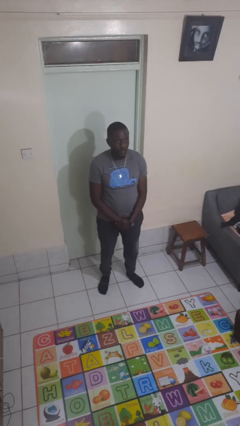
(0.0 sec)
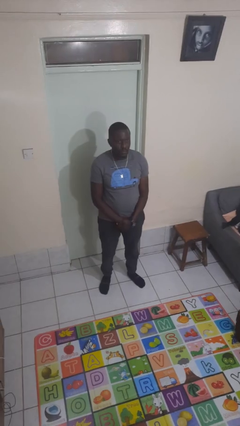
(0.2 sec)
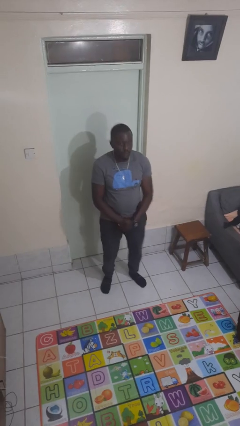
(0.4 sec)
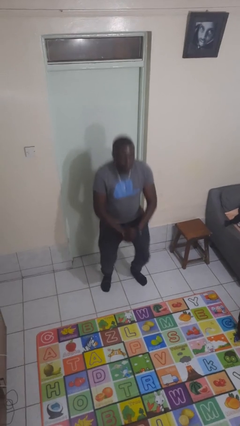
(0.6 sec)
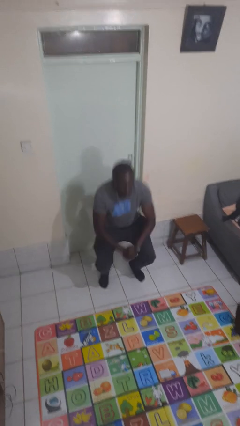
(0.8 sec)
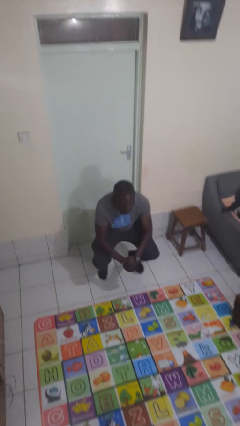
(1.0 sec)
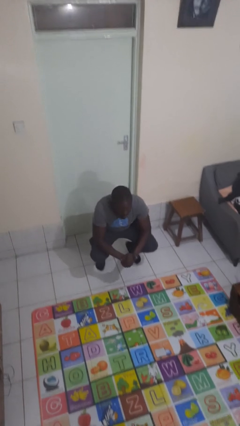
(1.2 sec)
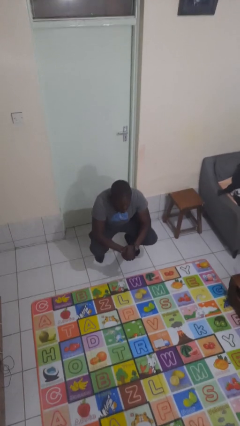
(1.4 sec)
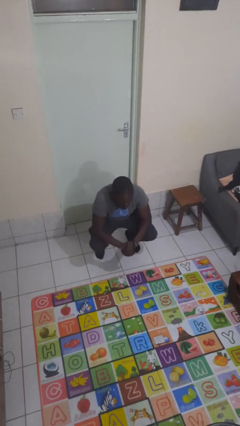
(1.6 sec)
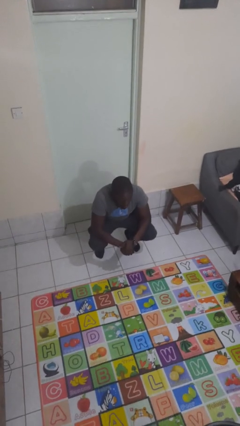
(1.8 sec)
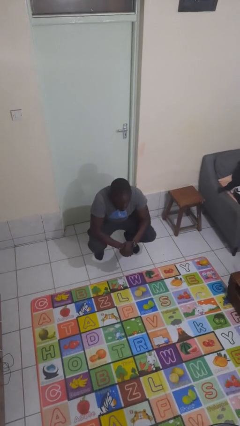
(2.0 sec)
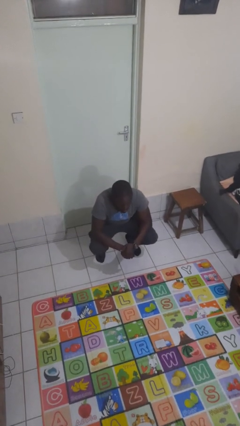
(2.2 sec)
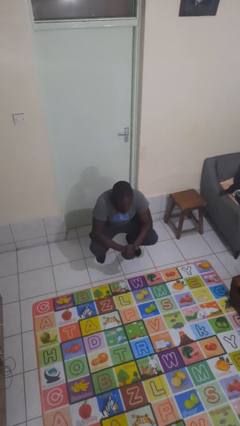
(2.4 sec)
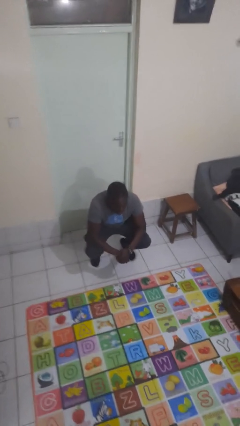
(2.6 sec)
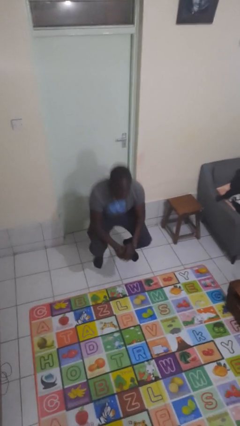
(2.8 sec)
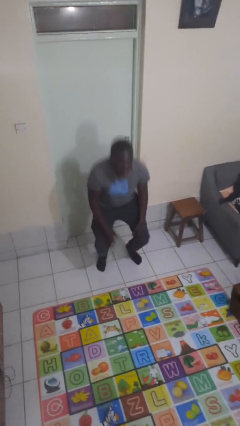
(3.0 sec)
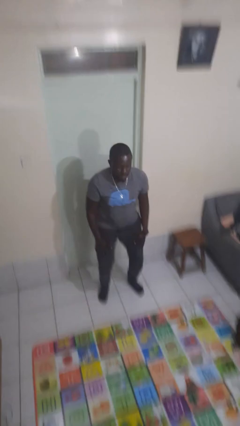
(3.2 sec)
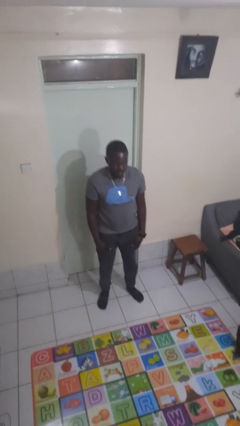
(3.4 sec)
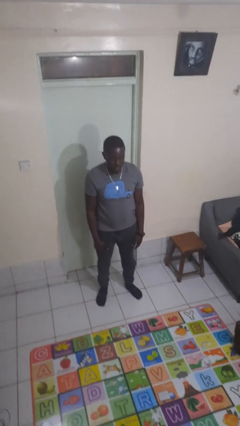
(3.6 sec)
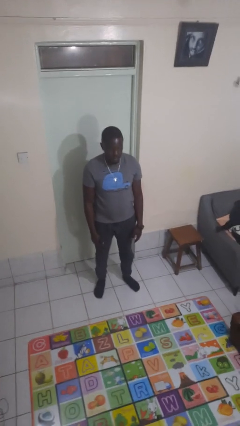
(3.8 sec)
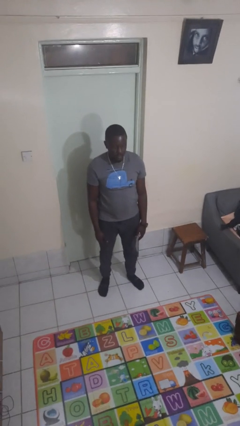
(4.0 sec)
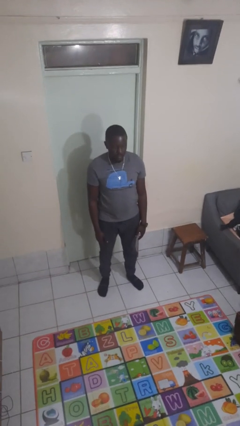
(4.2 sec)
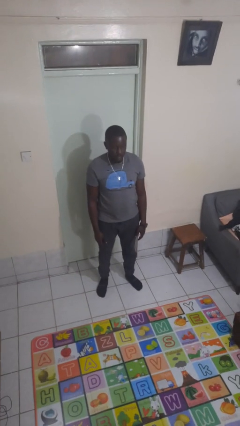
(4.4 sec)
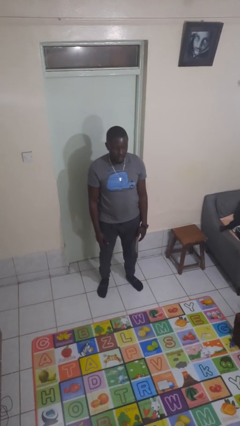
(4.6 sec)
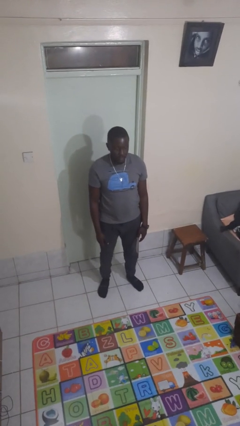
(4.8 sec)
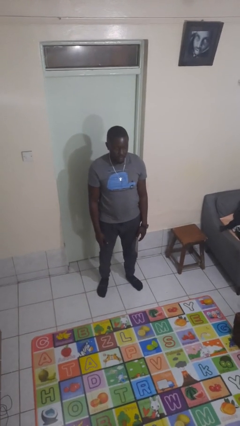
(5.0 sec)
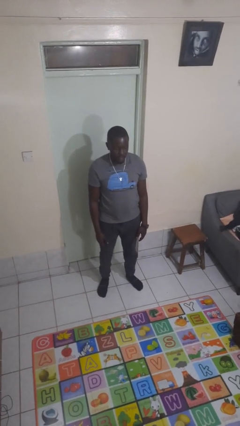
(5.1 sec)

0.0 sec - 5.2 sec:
person squats

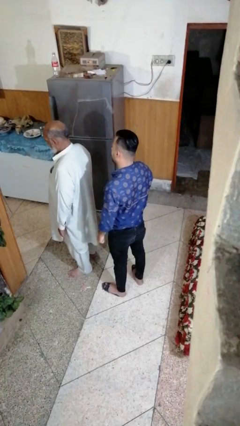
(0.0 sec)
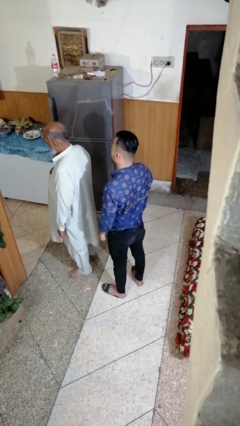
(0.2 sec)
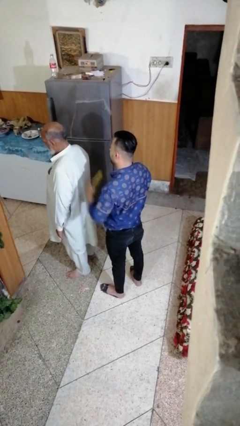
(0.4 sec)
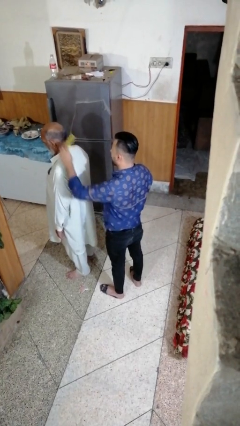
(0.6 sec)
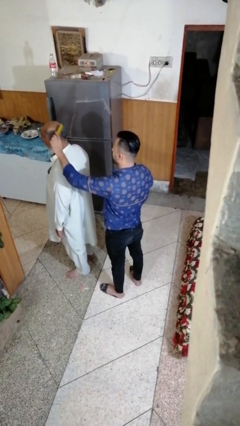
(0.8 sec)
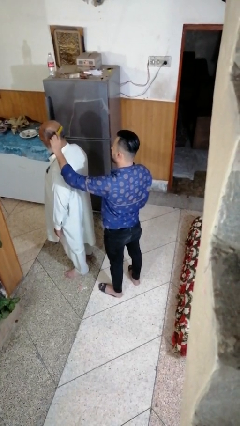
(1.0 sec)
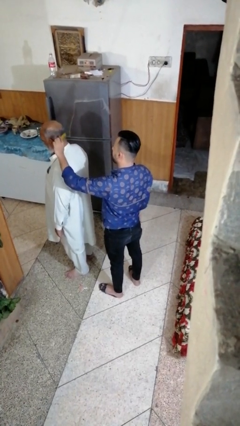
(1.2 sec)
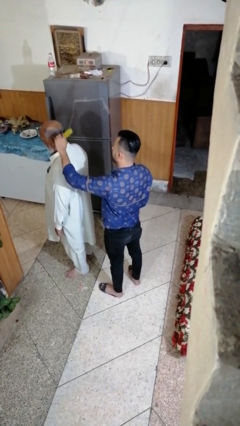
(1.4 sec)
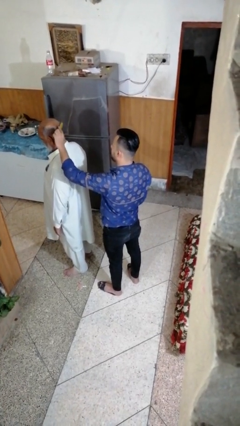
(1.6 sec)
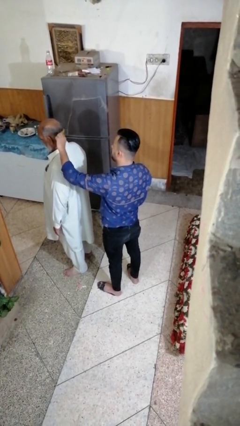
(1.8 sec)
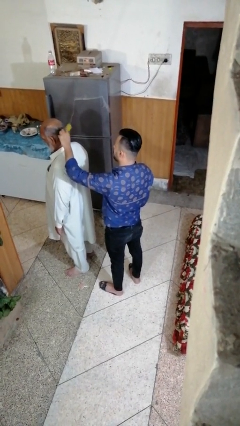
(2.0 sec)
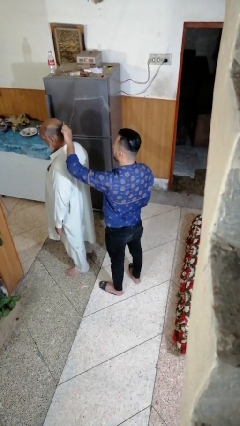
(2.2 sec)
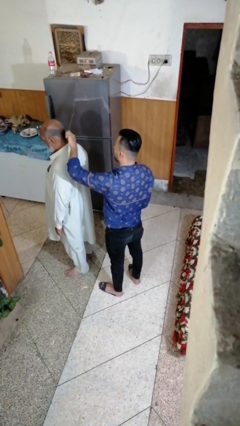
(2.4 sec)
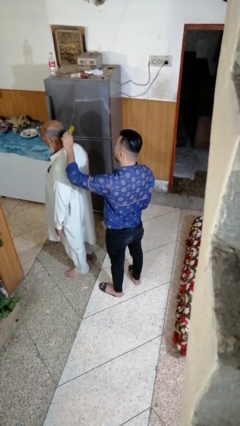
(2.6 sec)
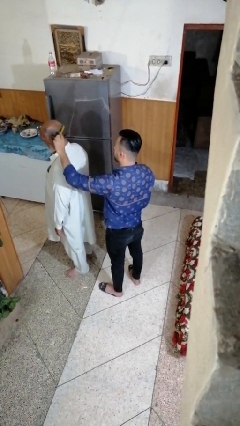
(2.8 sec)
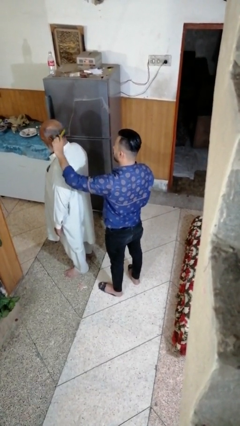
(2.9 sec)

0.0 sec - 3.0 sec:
person brushes hair of person

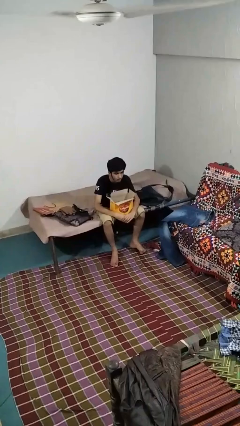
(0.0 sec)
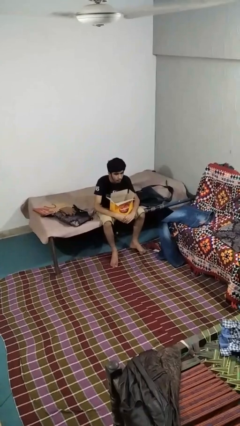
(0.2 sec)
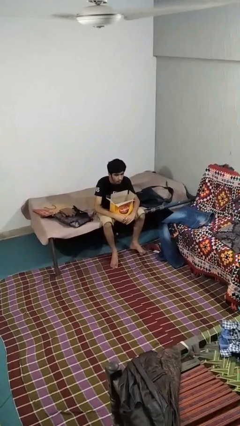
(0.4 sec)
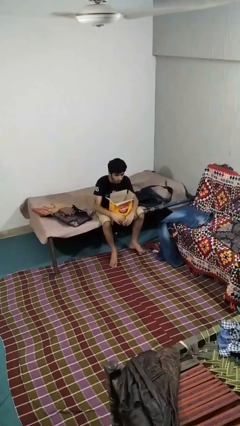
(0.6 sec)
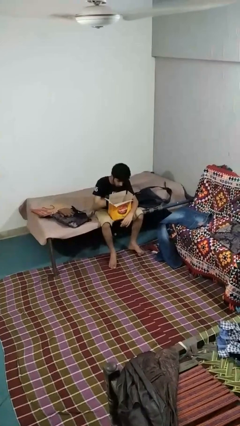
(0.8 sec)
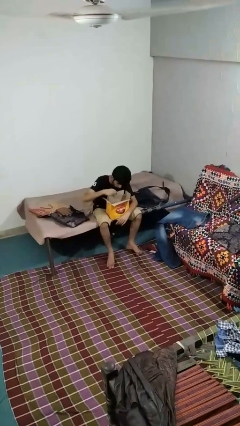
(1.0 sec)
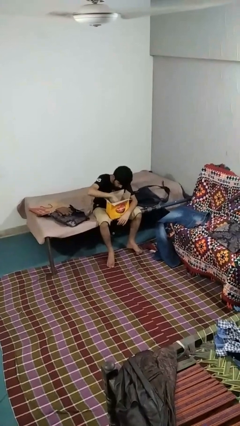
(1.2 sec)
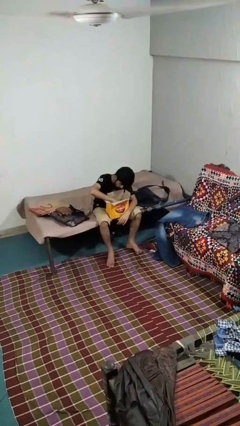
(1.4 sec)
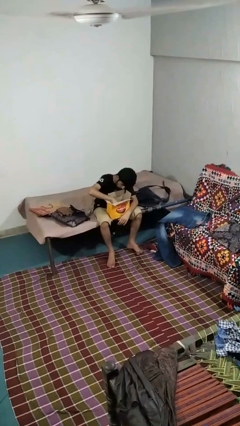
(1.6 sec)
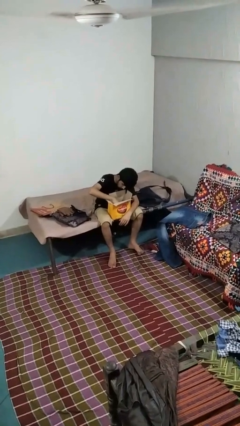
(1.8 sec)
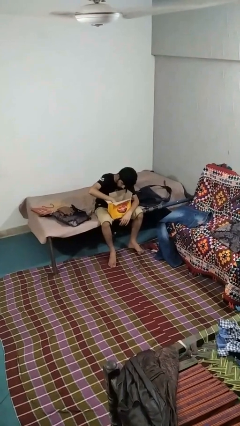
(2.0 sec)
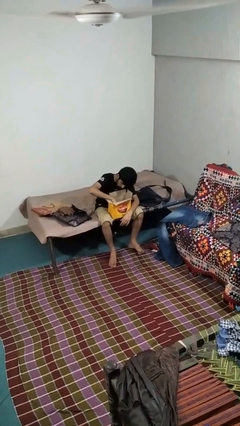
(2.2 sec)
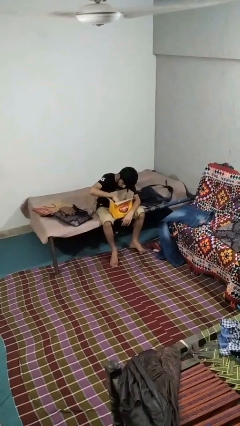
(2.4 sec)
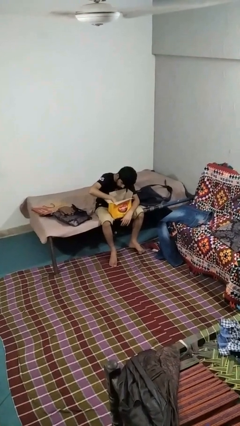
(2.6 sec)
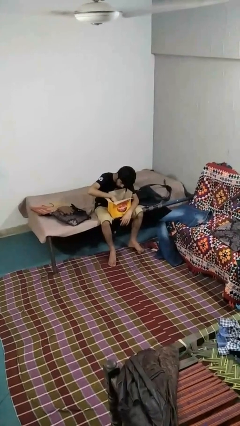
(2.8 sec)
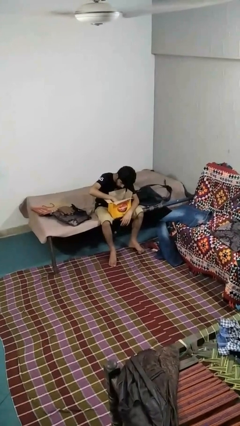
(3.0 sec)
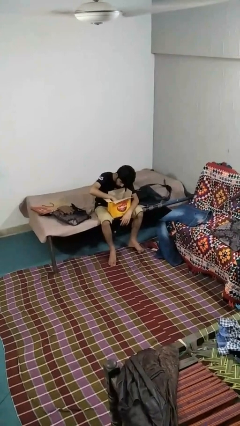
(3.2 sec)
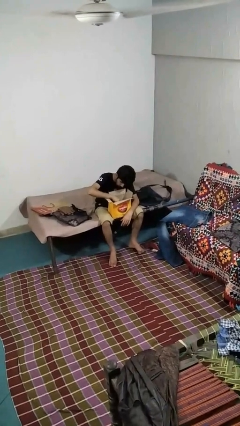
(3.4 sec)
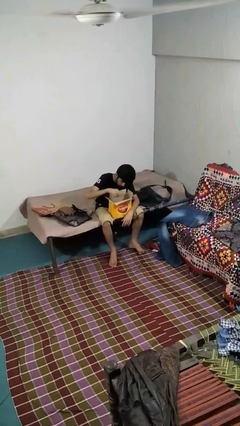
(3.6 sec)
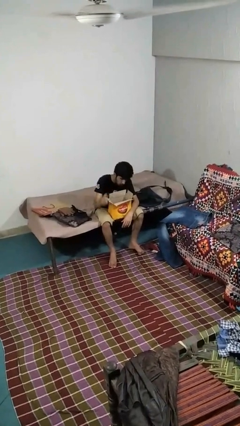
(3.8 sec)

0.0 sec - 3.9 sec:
person searches in box

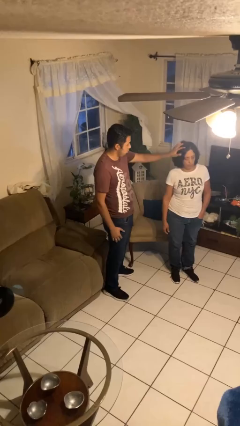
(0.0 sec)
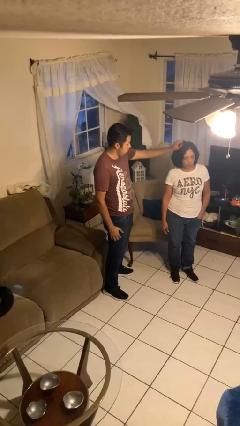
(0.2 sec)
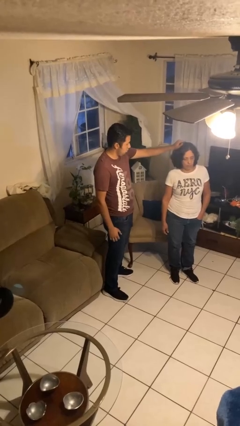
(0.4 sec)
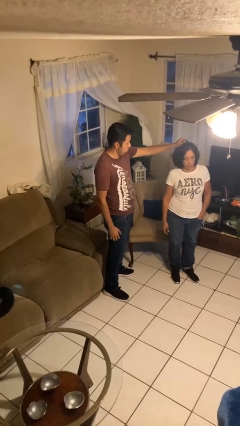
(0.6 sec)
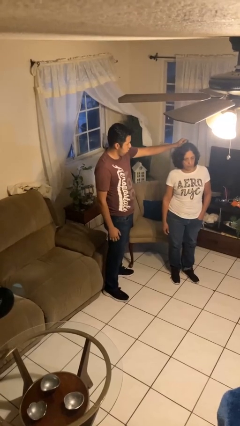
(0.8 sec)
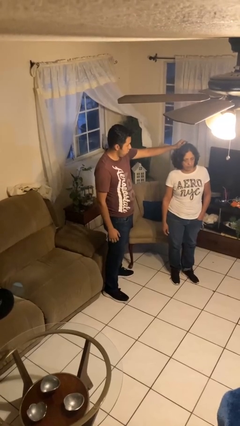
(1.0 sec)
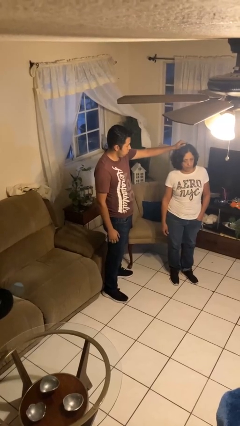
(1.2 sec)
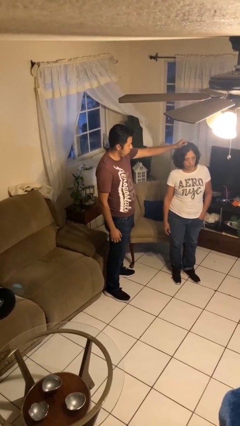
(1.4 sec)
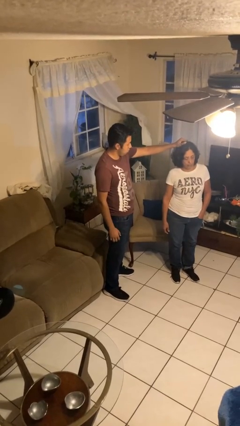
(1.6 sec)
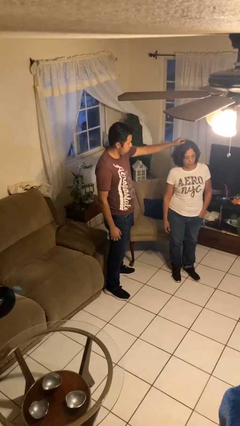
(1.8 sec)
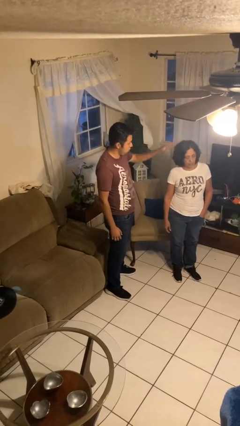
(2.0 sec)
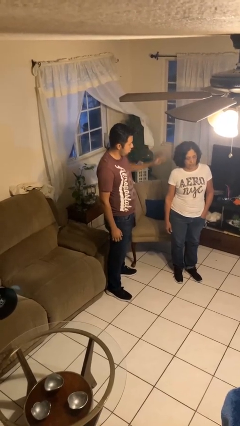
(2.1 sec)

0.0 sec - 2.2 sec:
person grabs person by hair

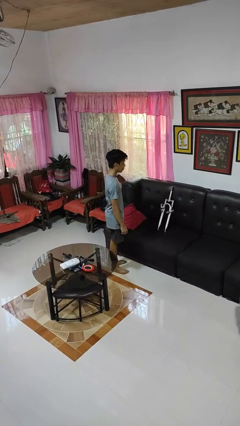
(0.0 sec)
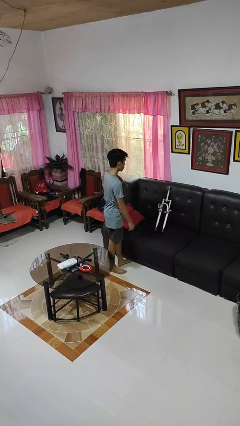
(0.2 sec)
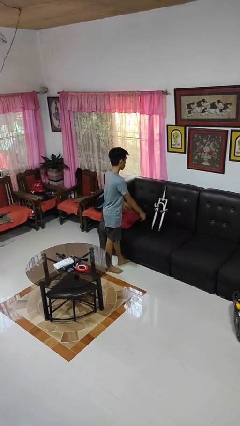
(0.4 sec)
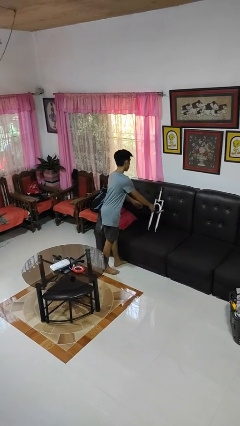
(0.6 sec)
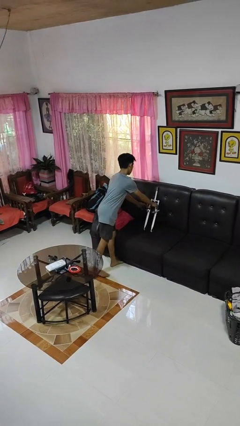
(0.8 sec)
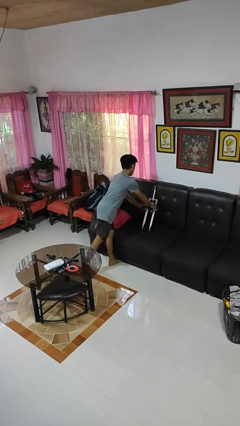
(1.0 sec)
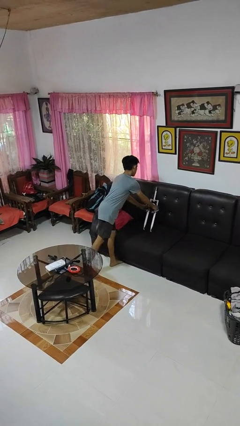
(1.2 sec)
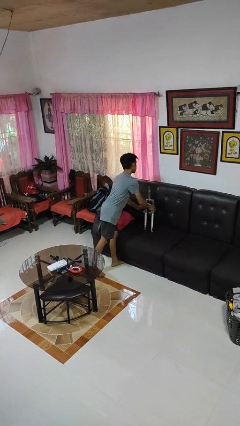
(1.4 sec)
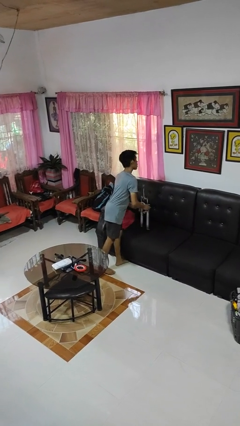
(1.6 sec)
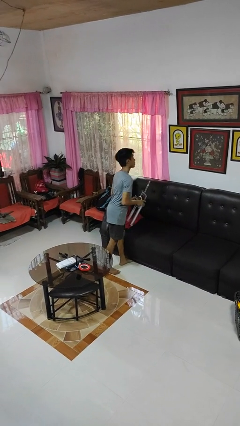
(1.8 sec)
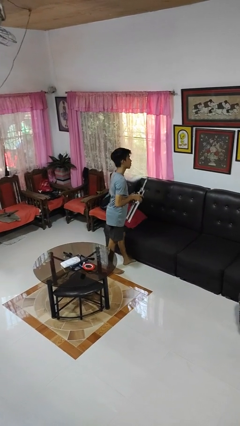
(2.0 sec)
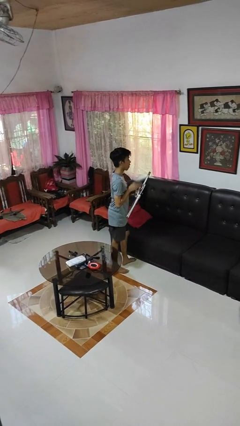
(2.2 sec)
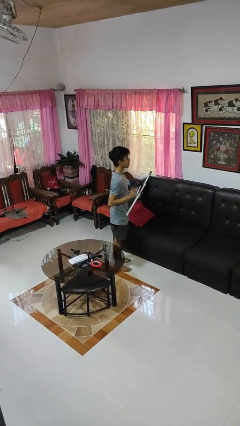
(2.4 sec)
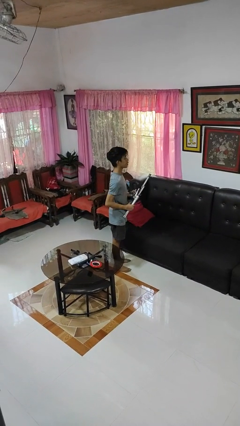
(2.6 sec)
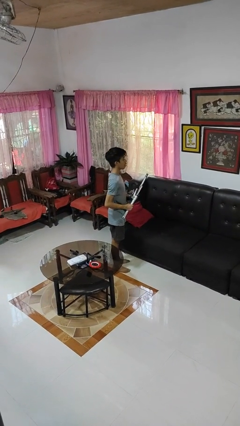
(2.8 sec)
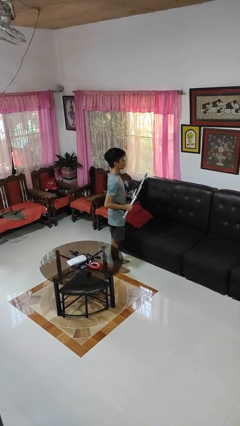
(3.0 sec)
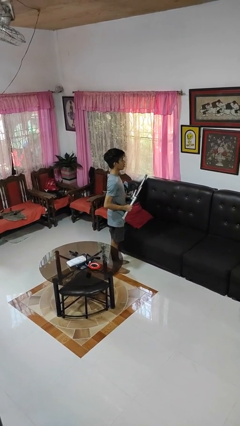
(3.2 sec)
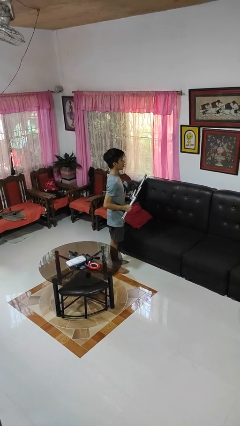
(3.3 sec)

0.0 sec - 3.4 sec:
person picks up object from couch
